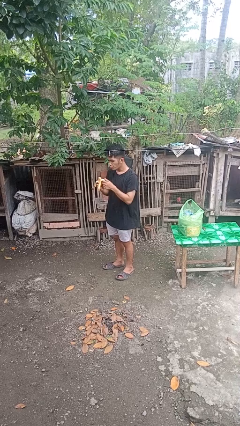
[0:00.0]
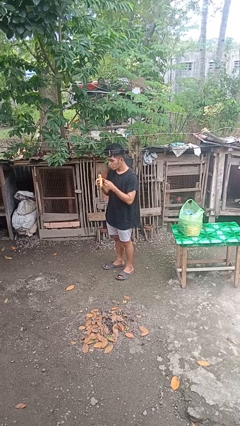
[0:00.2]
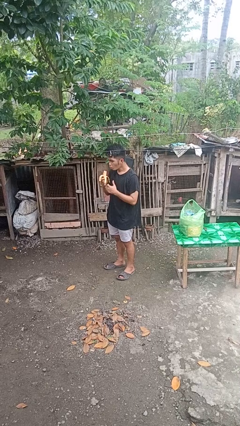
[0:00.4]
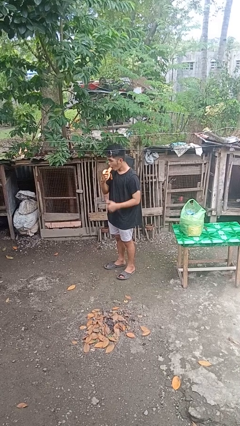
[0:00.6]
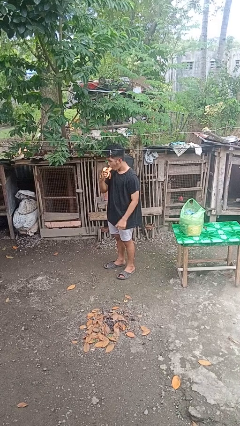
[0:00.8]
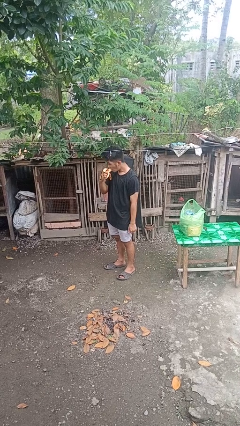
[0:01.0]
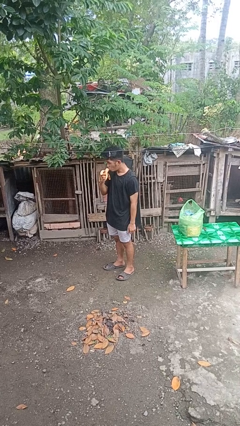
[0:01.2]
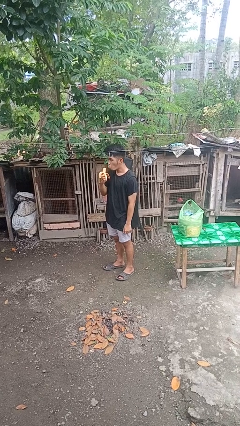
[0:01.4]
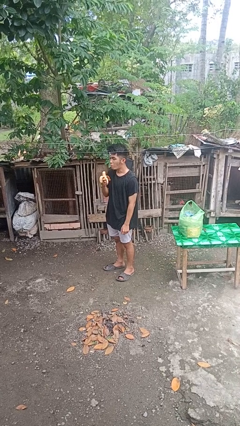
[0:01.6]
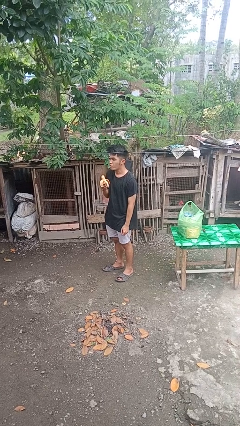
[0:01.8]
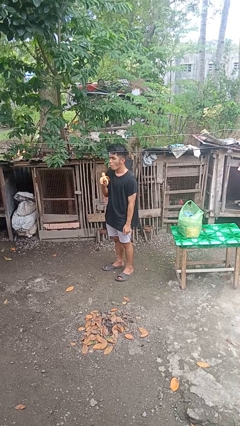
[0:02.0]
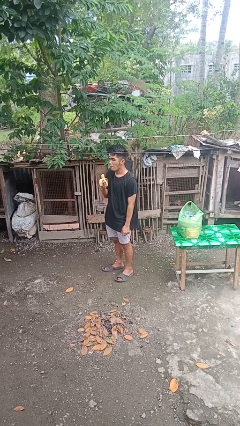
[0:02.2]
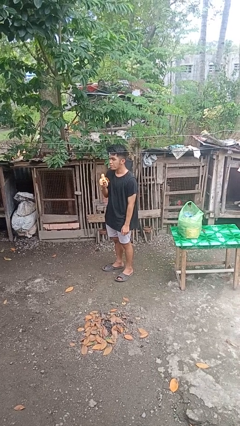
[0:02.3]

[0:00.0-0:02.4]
person eats banana

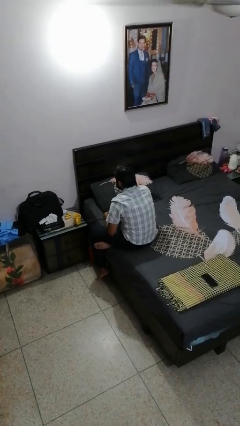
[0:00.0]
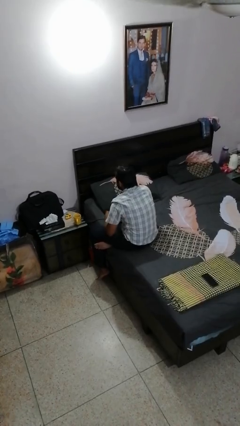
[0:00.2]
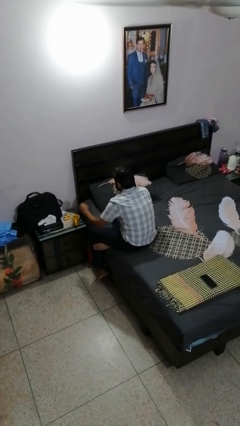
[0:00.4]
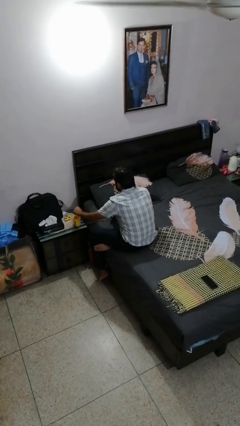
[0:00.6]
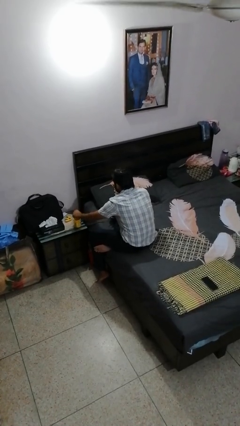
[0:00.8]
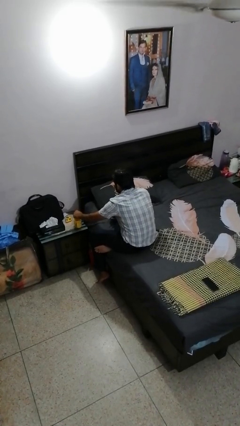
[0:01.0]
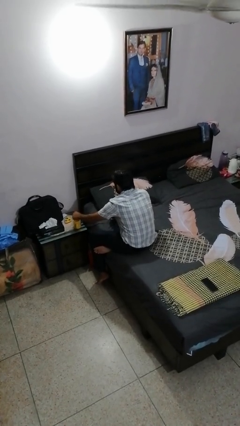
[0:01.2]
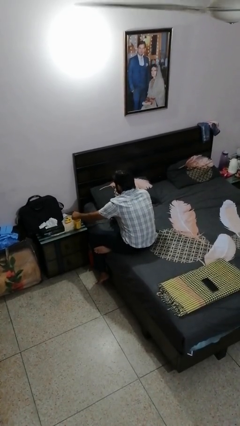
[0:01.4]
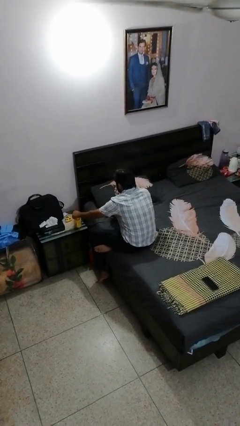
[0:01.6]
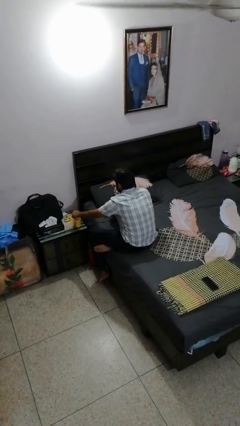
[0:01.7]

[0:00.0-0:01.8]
person stirs mug

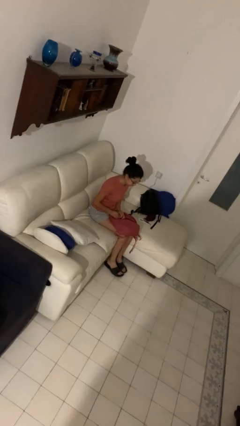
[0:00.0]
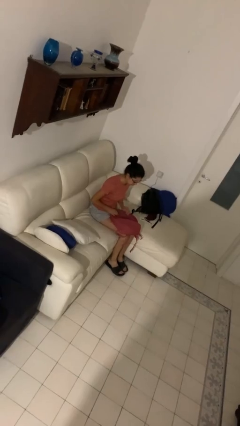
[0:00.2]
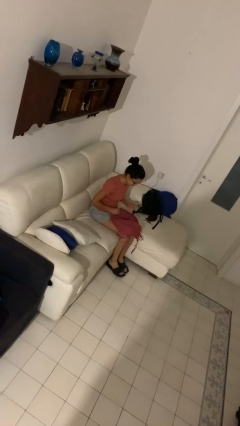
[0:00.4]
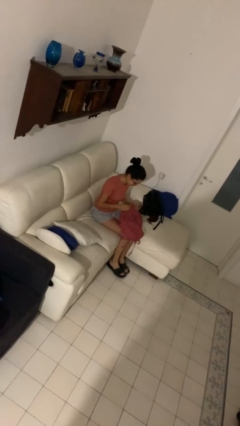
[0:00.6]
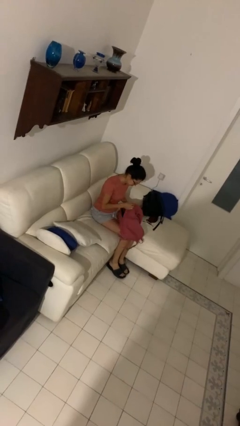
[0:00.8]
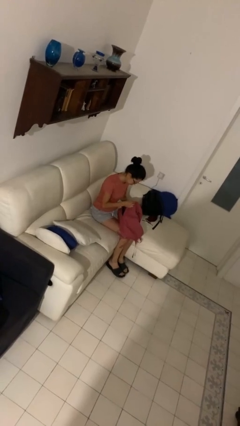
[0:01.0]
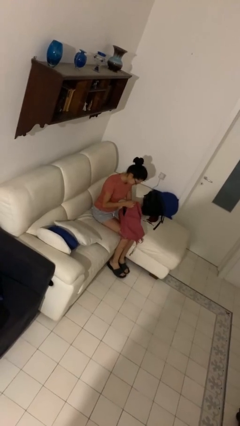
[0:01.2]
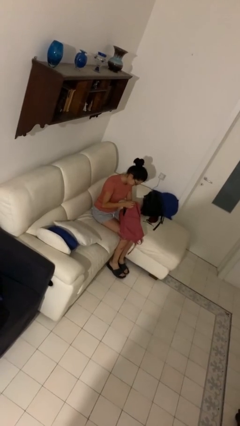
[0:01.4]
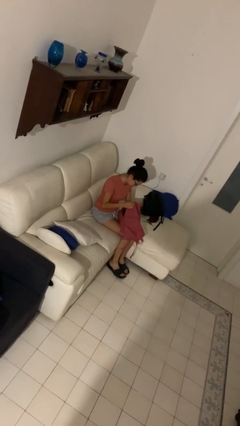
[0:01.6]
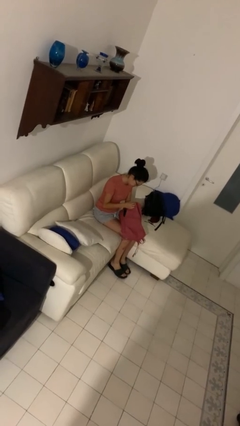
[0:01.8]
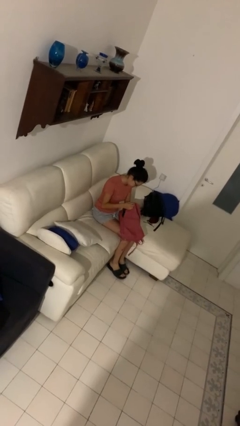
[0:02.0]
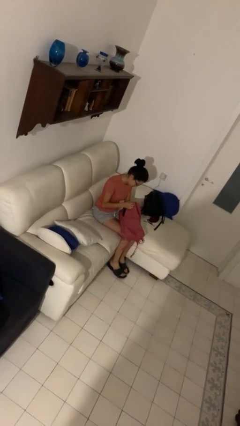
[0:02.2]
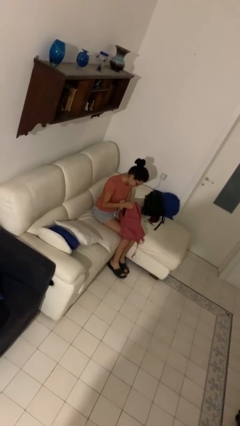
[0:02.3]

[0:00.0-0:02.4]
person searches in purse

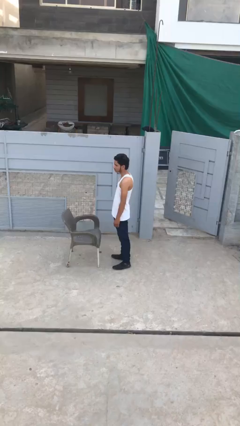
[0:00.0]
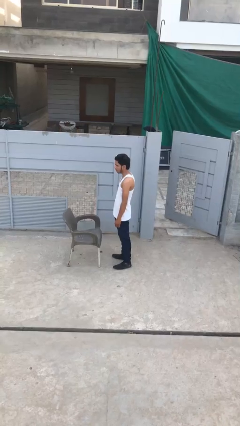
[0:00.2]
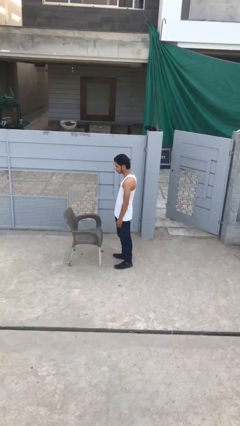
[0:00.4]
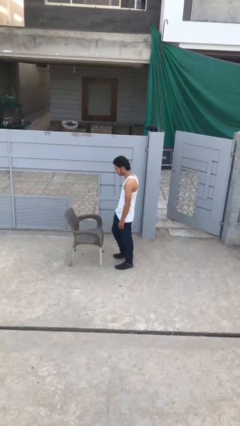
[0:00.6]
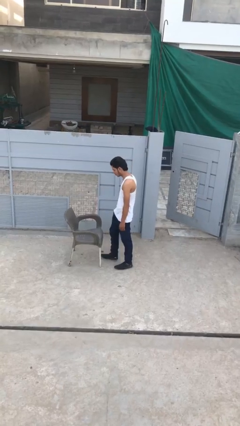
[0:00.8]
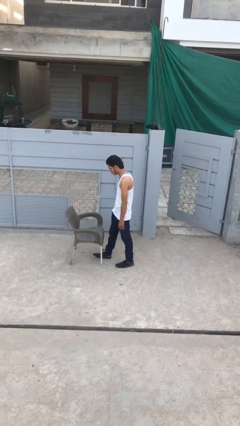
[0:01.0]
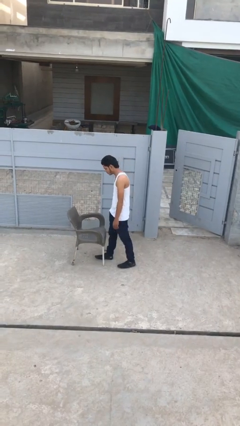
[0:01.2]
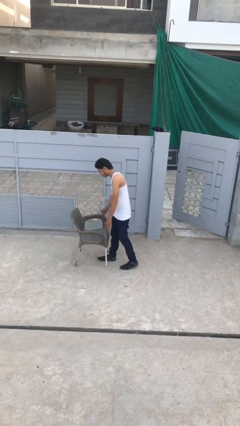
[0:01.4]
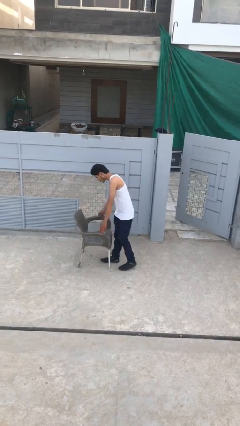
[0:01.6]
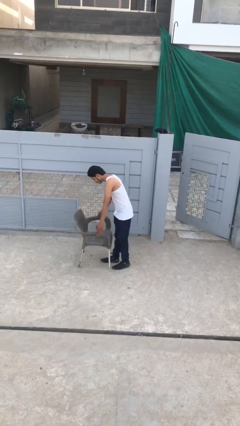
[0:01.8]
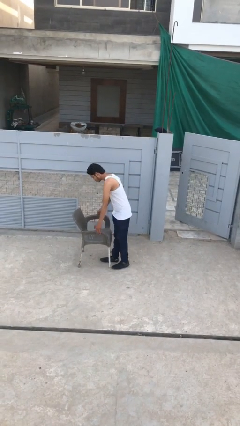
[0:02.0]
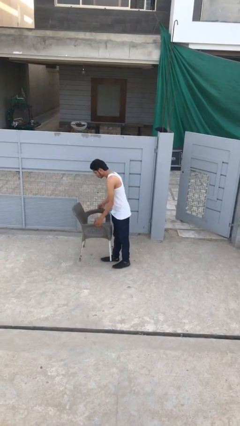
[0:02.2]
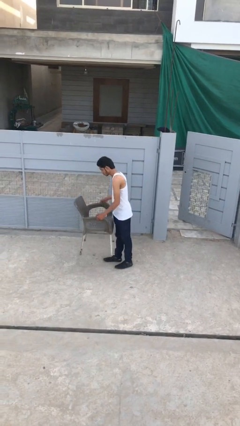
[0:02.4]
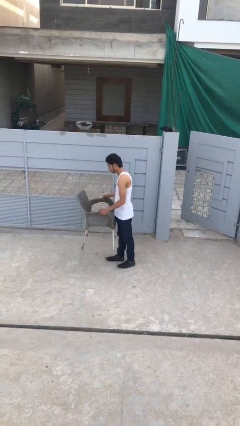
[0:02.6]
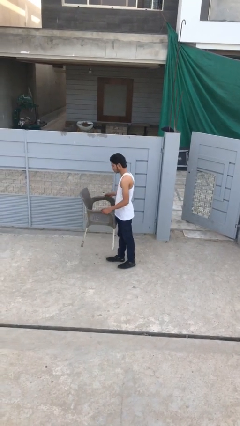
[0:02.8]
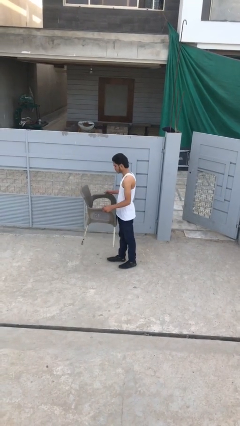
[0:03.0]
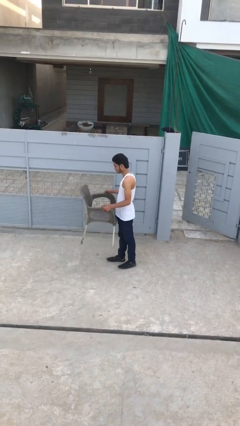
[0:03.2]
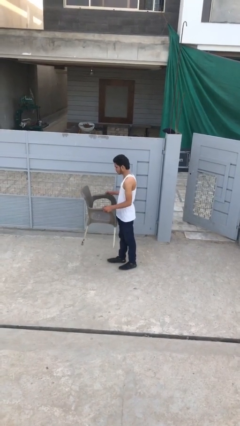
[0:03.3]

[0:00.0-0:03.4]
person picks up object from floor

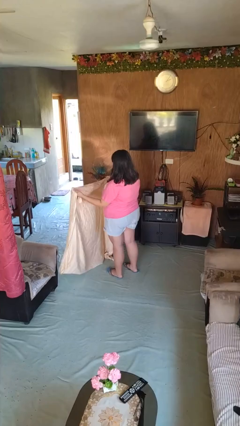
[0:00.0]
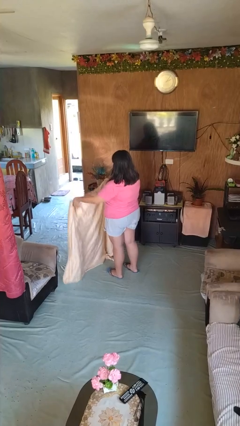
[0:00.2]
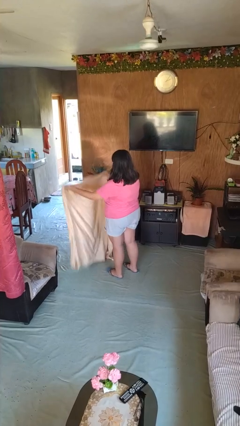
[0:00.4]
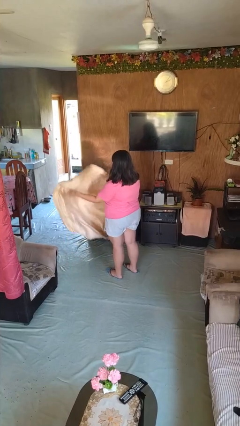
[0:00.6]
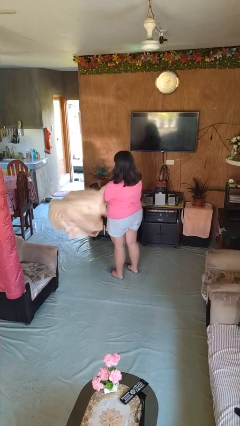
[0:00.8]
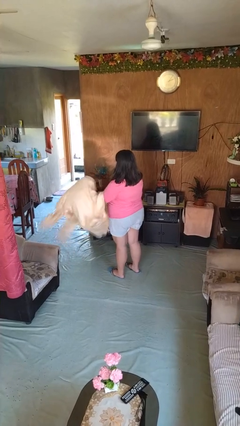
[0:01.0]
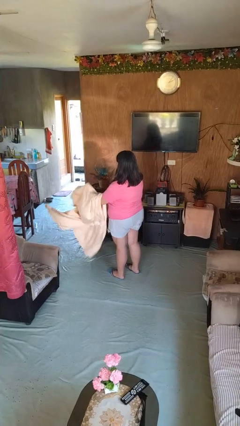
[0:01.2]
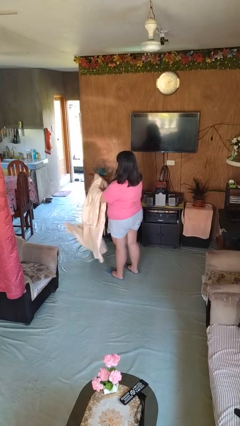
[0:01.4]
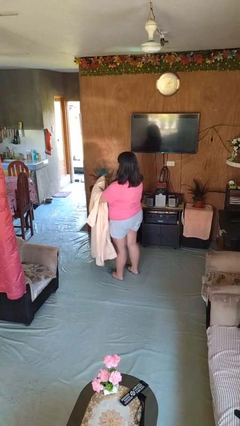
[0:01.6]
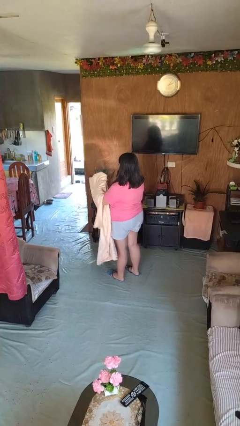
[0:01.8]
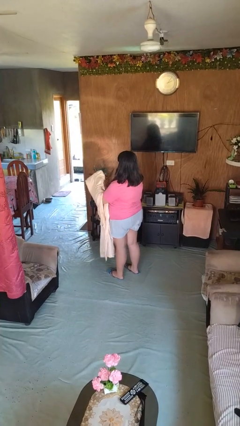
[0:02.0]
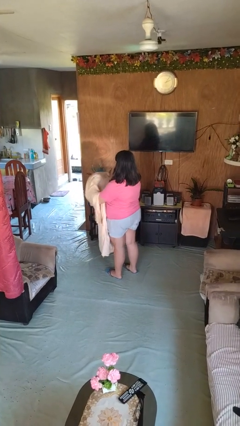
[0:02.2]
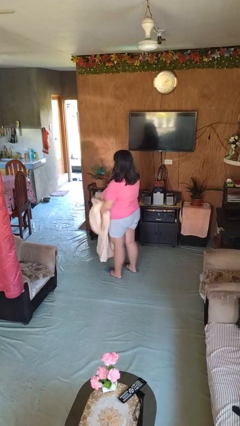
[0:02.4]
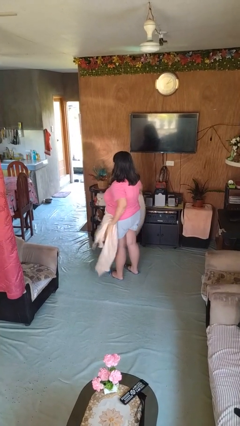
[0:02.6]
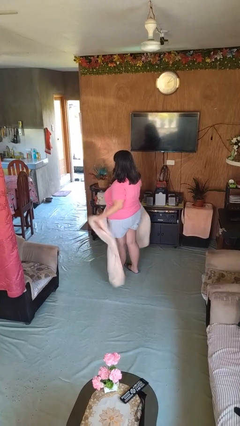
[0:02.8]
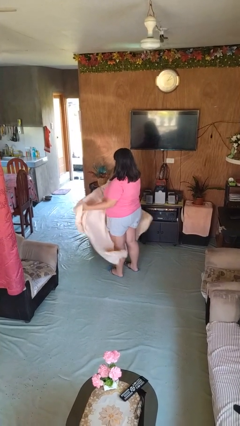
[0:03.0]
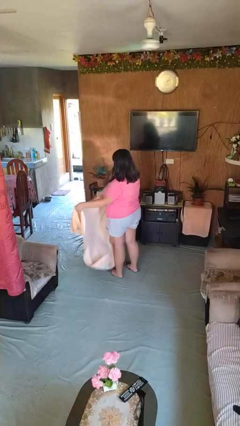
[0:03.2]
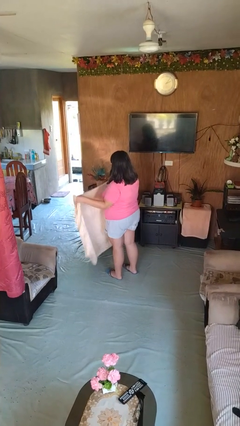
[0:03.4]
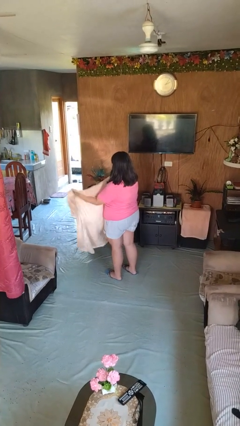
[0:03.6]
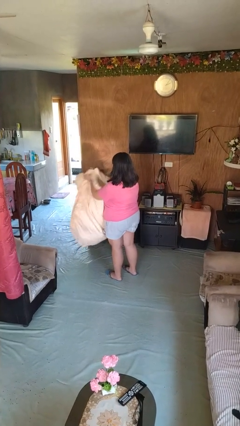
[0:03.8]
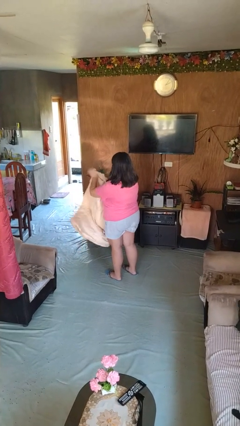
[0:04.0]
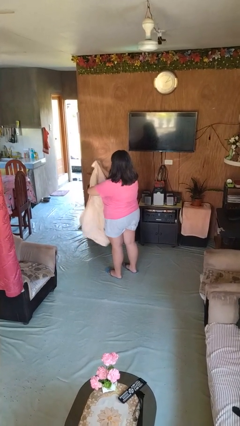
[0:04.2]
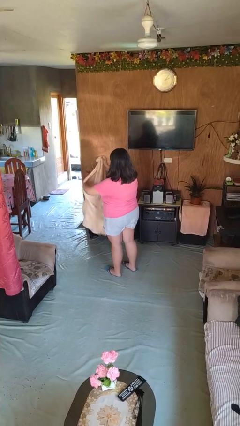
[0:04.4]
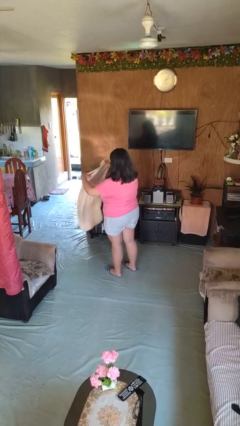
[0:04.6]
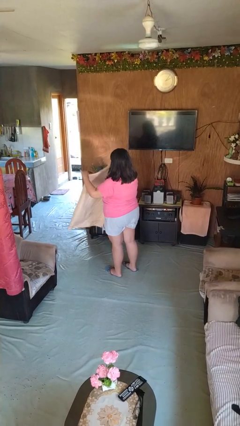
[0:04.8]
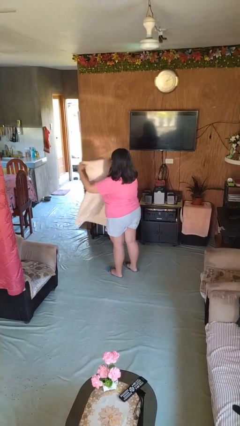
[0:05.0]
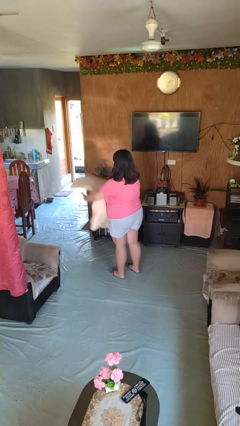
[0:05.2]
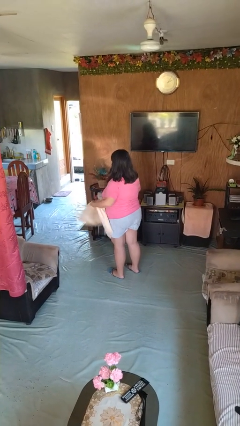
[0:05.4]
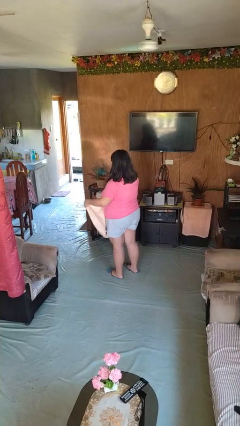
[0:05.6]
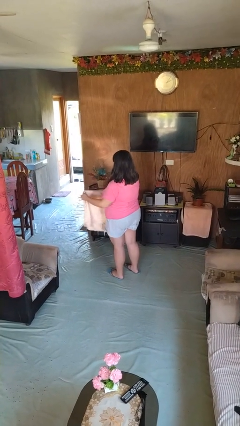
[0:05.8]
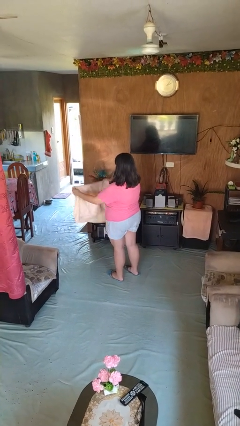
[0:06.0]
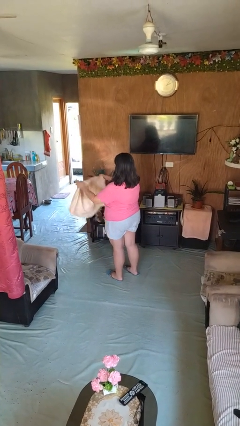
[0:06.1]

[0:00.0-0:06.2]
person folds blanket

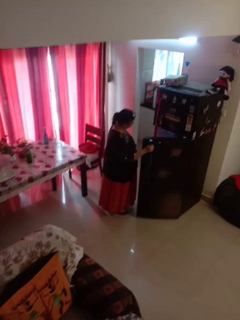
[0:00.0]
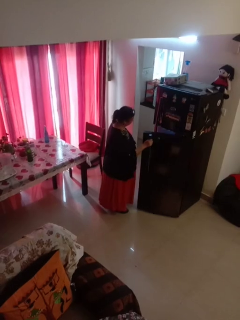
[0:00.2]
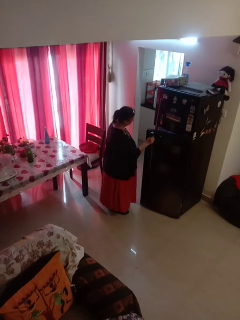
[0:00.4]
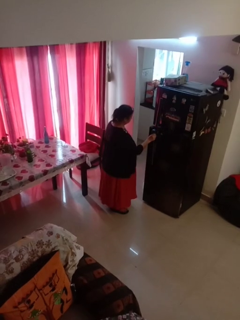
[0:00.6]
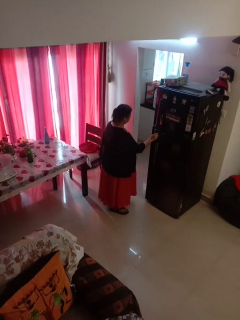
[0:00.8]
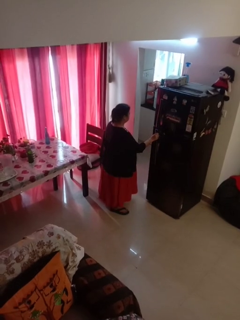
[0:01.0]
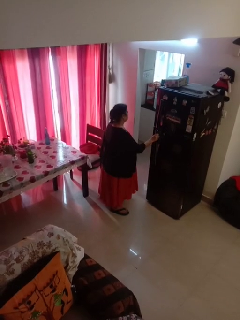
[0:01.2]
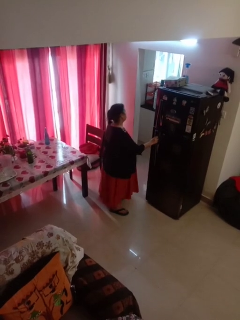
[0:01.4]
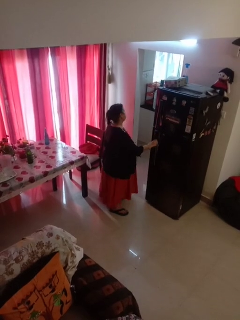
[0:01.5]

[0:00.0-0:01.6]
person closes refrigerator
